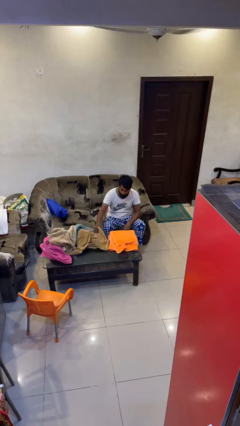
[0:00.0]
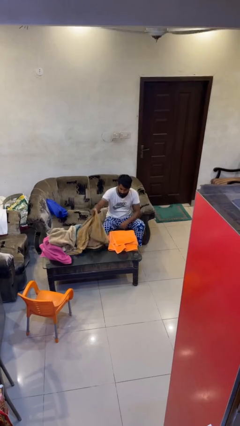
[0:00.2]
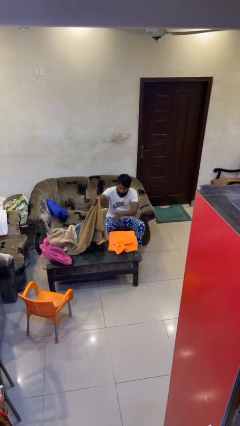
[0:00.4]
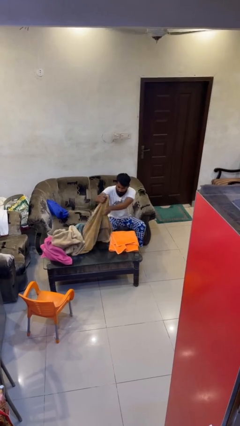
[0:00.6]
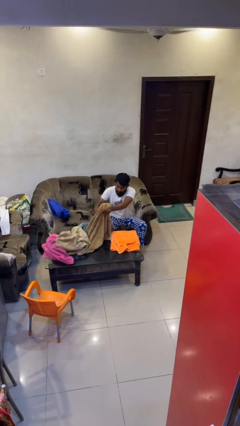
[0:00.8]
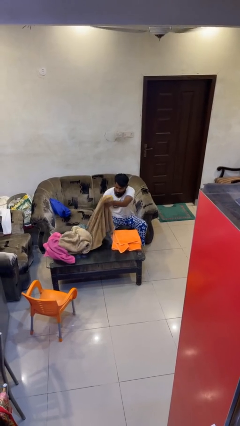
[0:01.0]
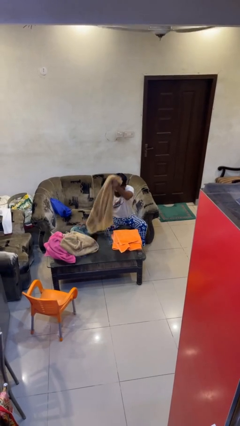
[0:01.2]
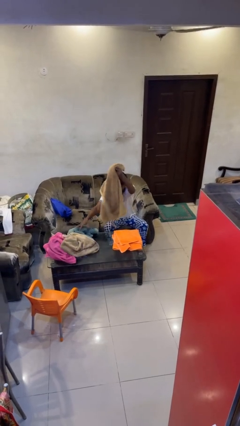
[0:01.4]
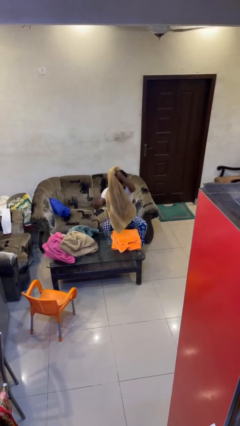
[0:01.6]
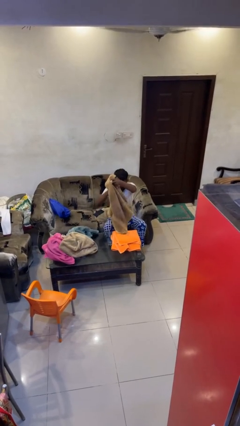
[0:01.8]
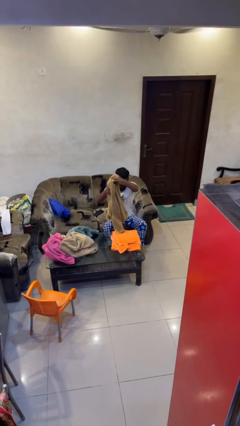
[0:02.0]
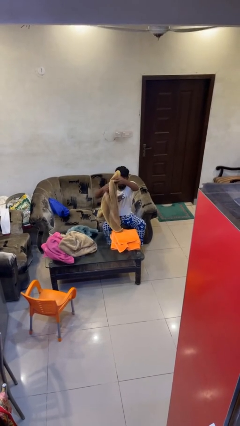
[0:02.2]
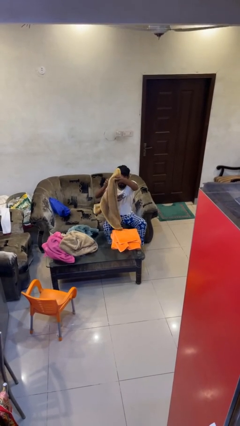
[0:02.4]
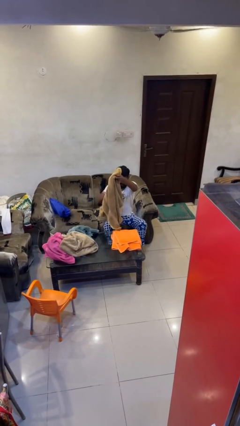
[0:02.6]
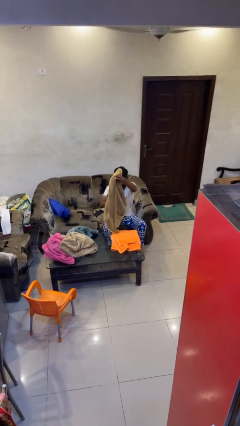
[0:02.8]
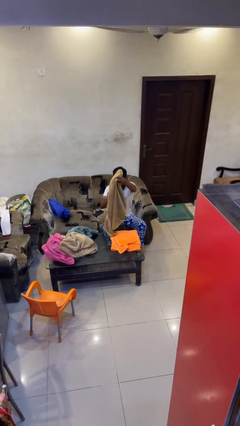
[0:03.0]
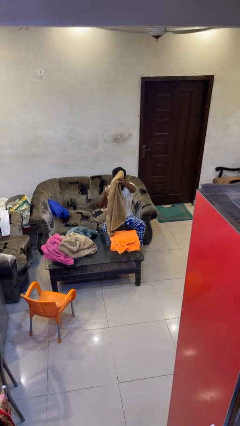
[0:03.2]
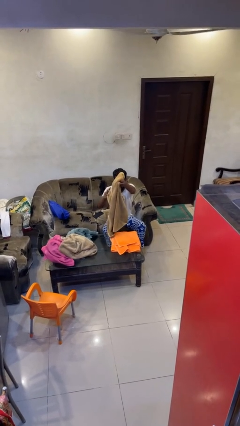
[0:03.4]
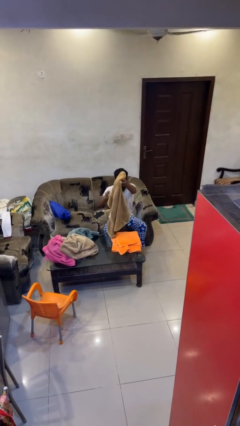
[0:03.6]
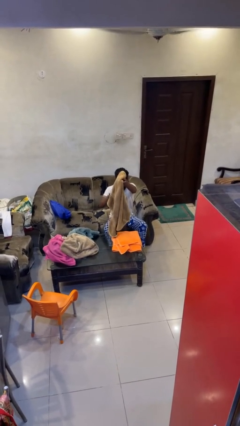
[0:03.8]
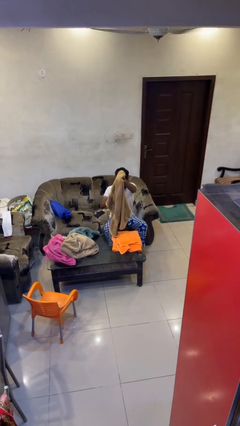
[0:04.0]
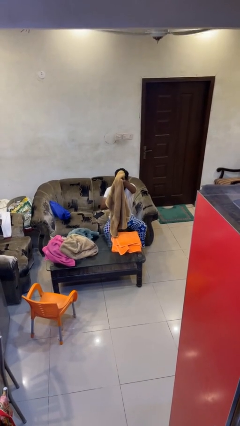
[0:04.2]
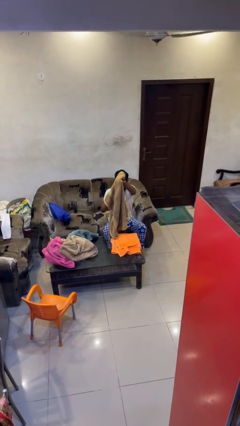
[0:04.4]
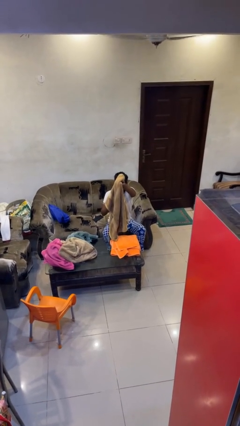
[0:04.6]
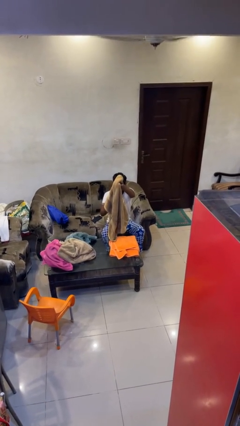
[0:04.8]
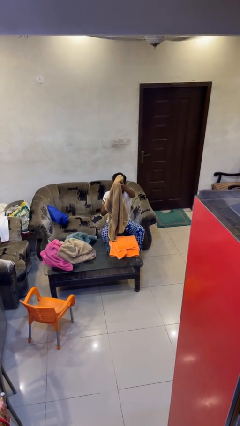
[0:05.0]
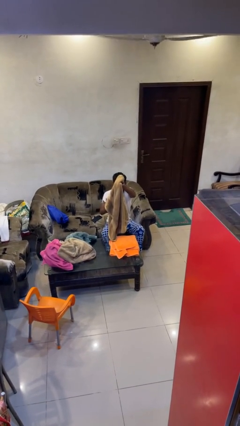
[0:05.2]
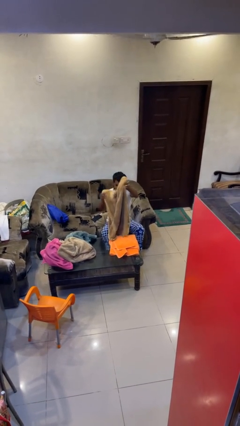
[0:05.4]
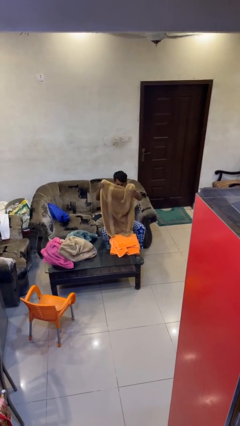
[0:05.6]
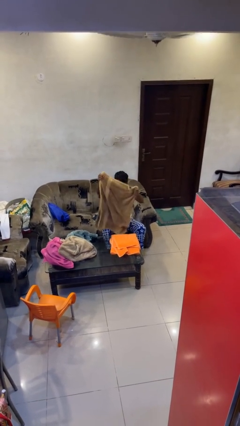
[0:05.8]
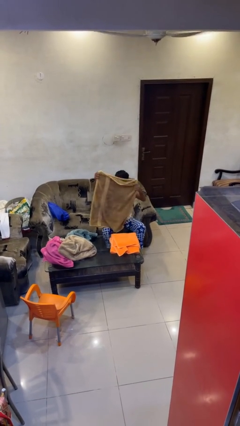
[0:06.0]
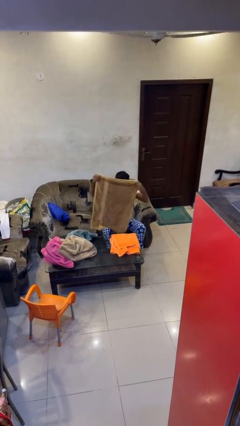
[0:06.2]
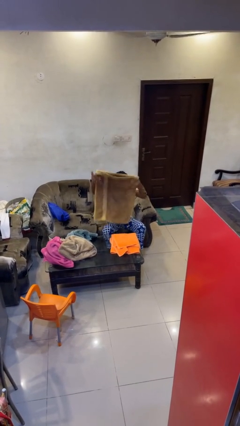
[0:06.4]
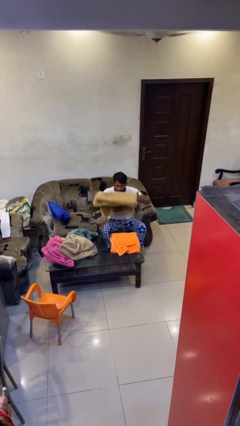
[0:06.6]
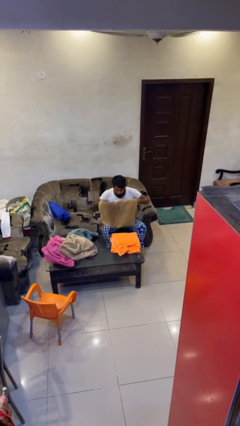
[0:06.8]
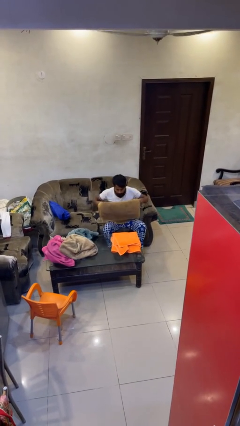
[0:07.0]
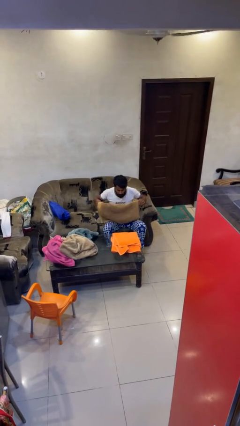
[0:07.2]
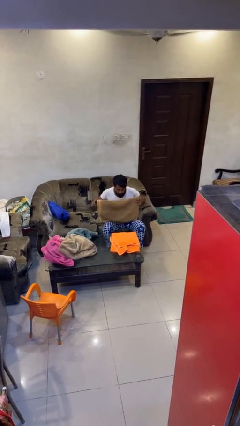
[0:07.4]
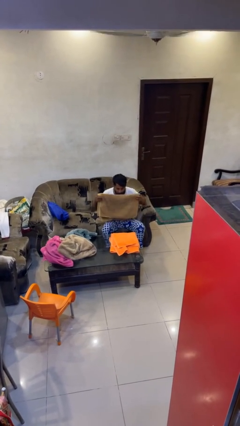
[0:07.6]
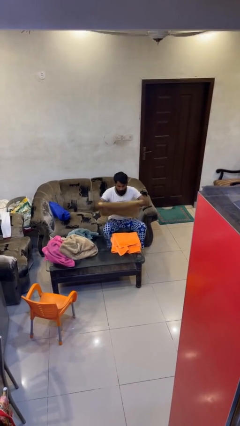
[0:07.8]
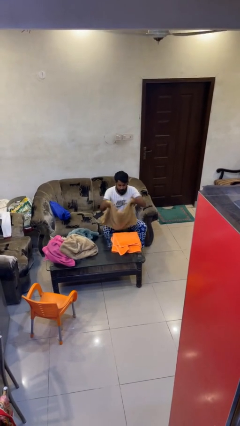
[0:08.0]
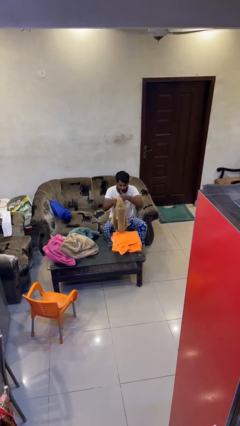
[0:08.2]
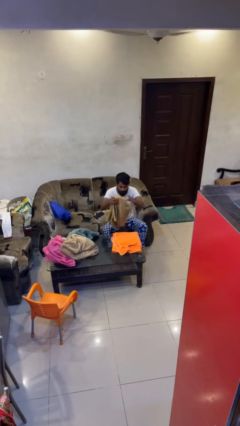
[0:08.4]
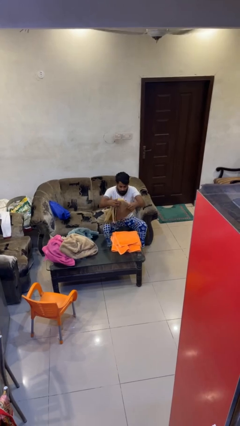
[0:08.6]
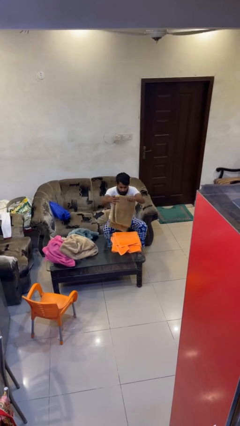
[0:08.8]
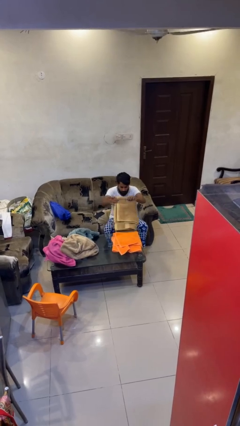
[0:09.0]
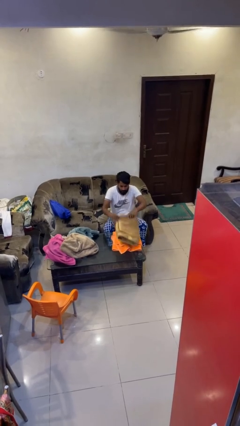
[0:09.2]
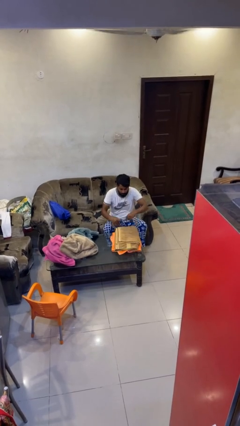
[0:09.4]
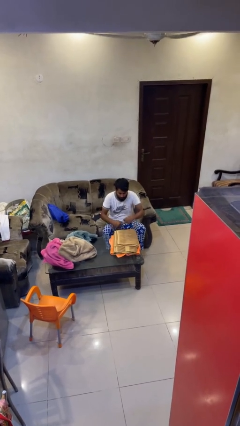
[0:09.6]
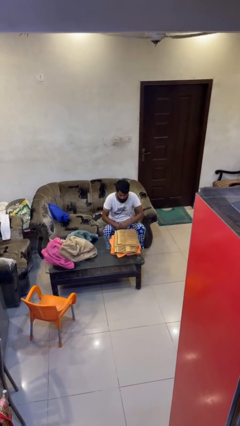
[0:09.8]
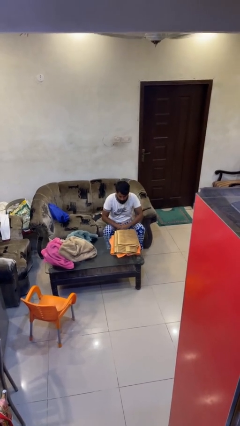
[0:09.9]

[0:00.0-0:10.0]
person folds towel

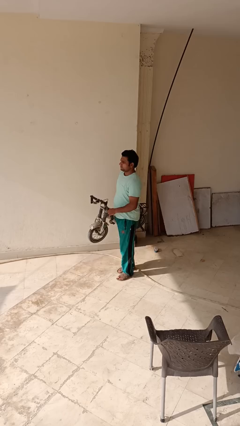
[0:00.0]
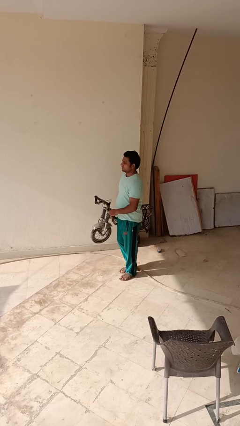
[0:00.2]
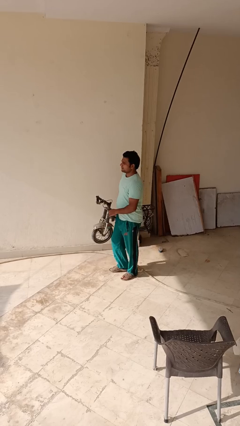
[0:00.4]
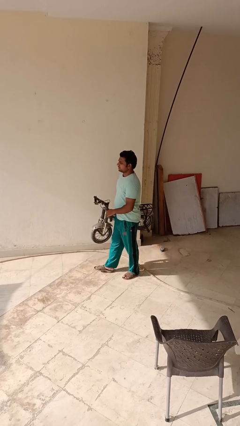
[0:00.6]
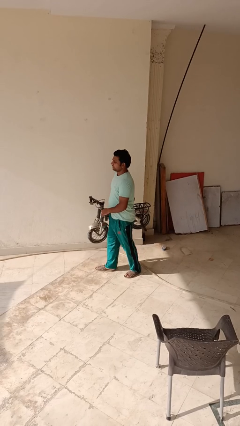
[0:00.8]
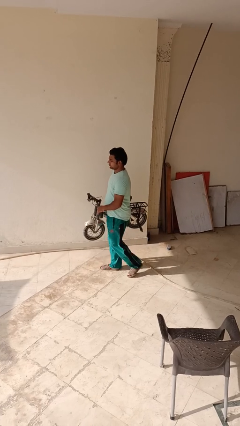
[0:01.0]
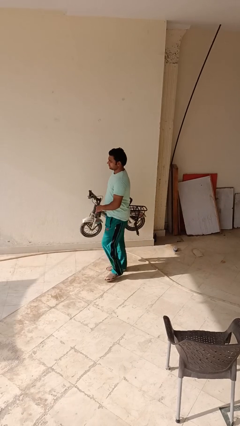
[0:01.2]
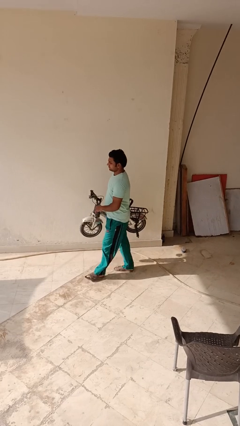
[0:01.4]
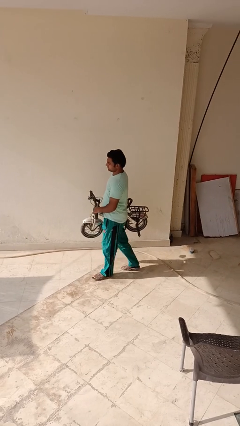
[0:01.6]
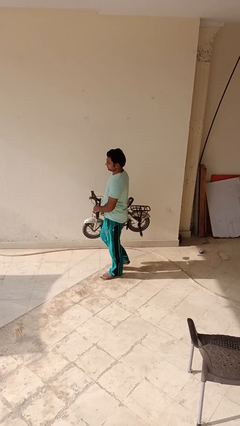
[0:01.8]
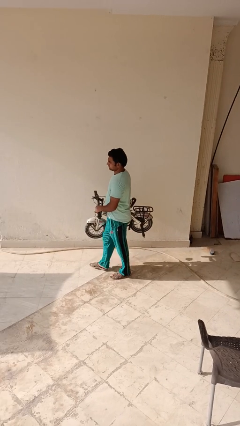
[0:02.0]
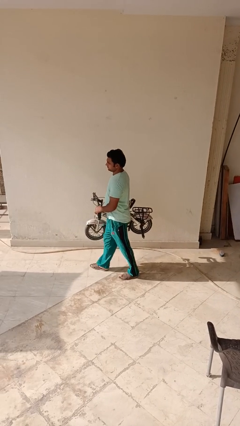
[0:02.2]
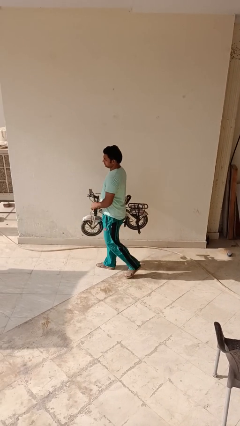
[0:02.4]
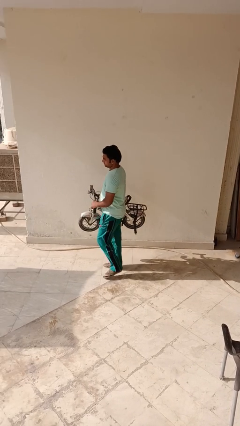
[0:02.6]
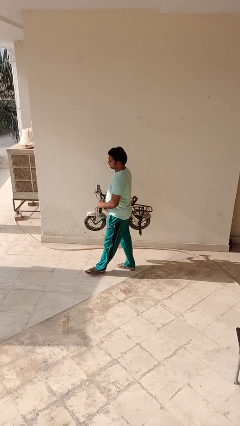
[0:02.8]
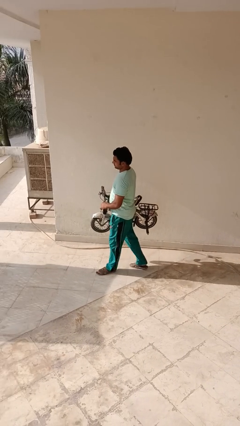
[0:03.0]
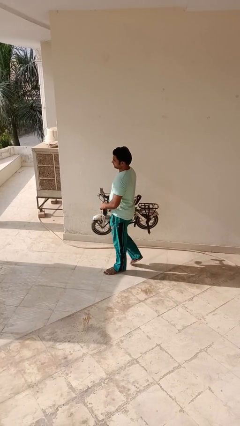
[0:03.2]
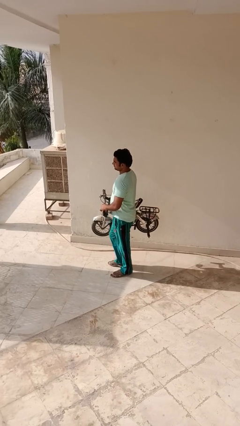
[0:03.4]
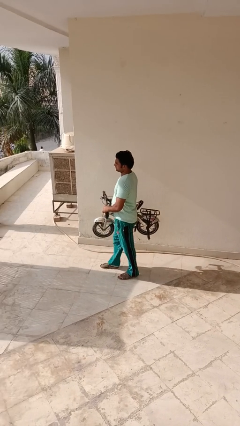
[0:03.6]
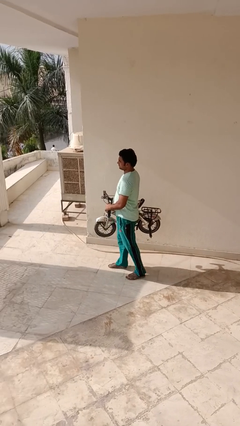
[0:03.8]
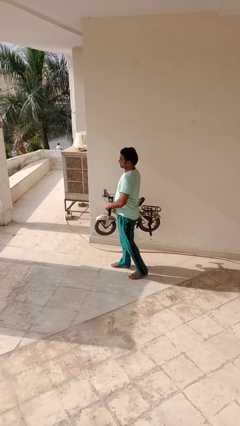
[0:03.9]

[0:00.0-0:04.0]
person carries bicycle

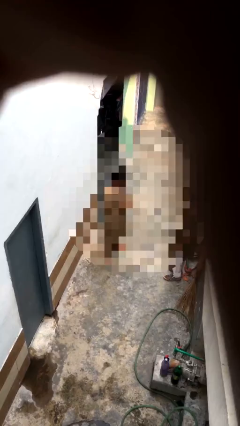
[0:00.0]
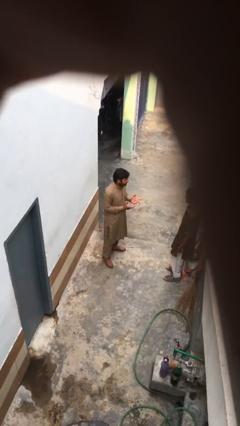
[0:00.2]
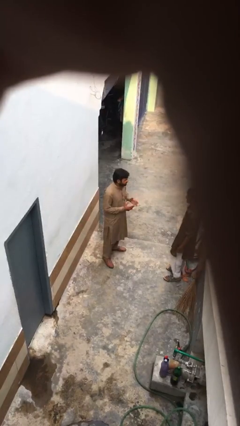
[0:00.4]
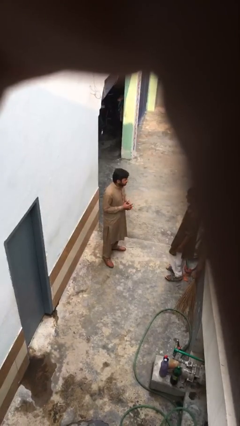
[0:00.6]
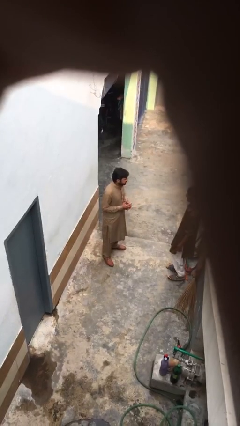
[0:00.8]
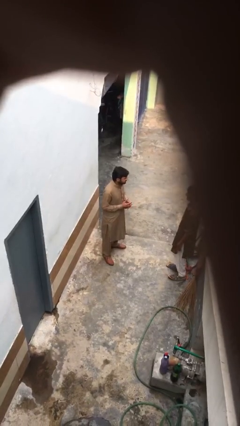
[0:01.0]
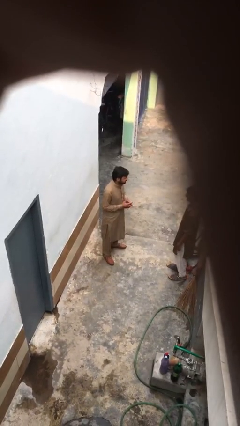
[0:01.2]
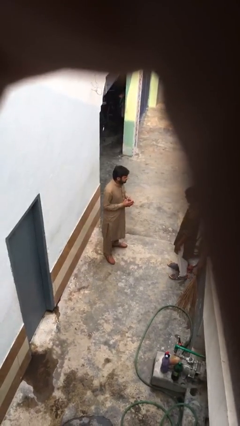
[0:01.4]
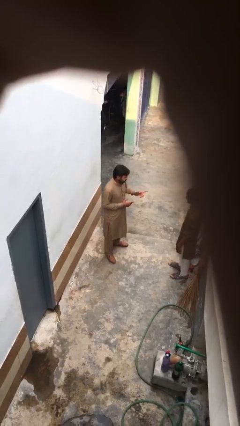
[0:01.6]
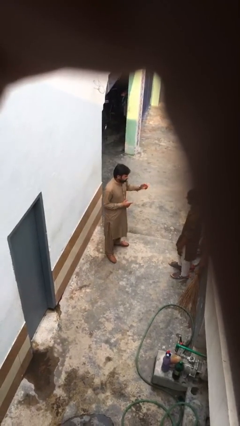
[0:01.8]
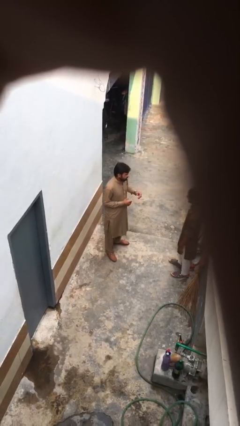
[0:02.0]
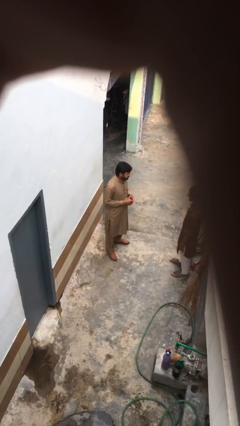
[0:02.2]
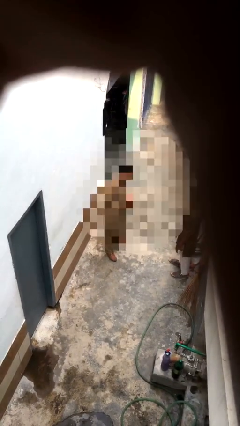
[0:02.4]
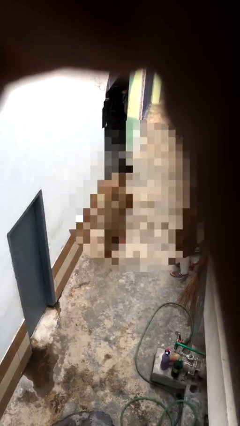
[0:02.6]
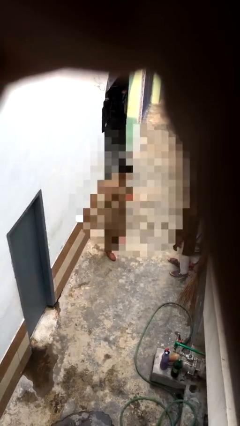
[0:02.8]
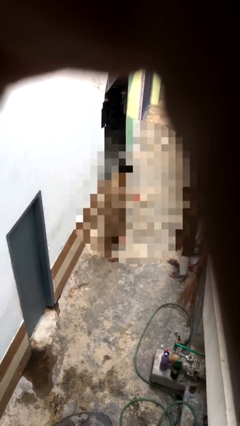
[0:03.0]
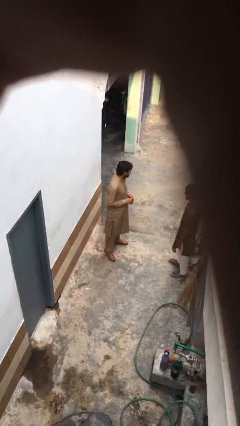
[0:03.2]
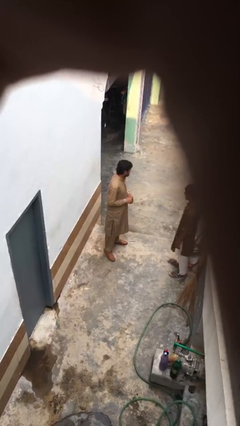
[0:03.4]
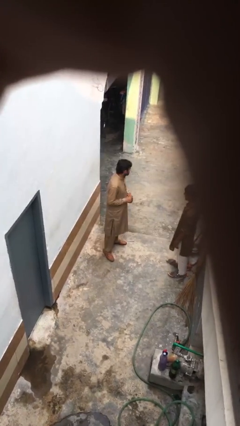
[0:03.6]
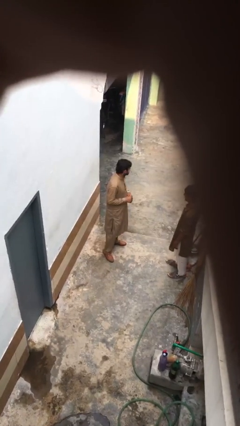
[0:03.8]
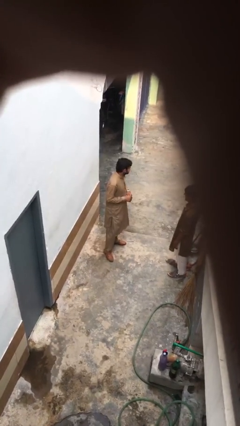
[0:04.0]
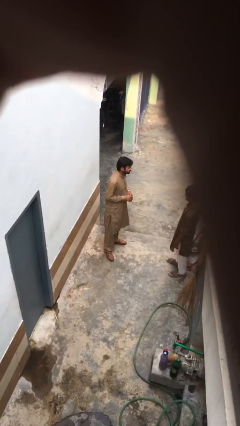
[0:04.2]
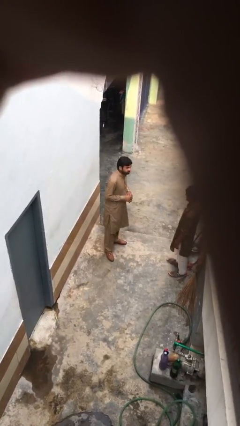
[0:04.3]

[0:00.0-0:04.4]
person talks to person
